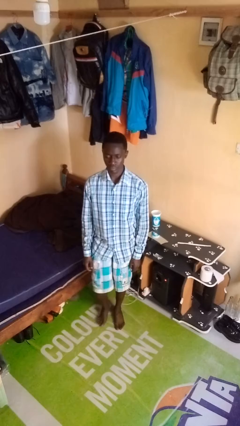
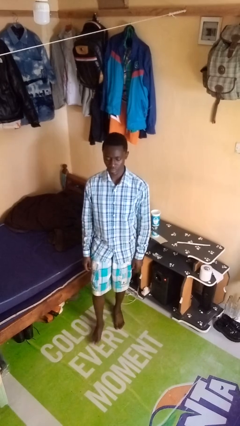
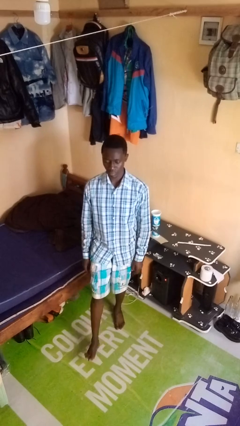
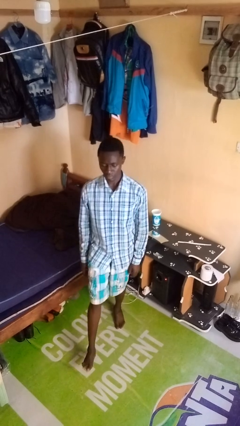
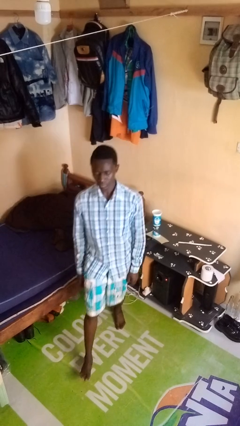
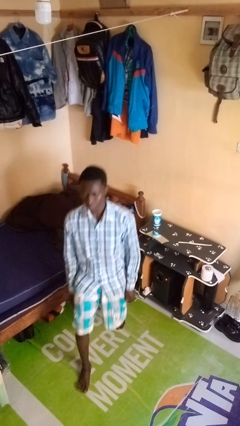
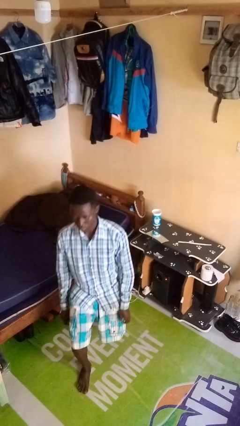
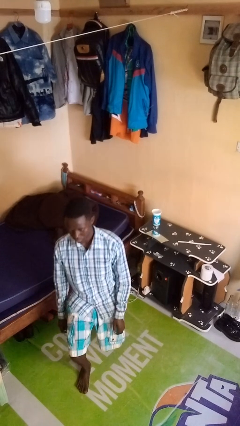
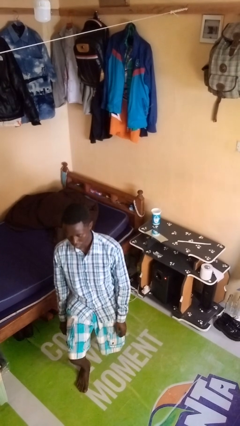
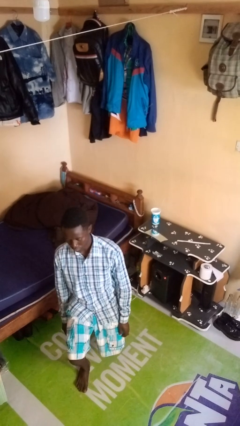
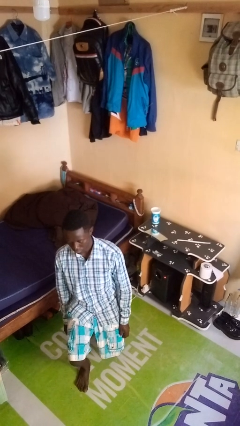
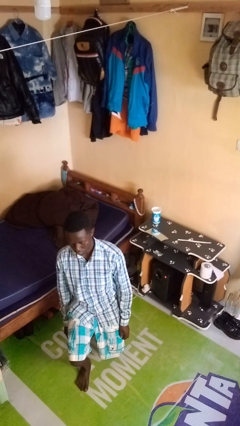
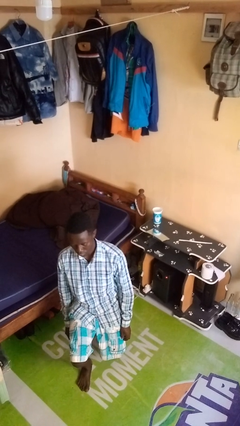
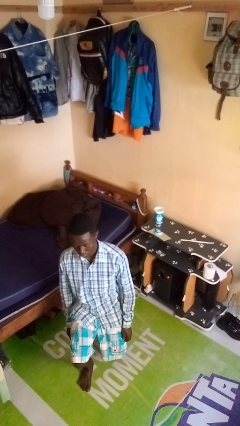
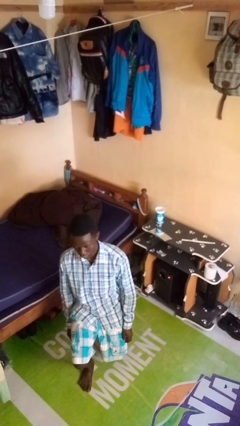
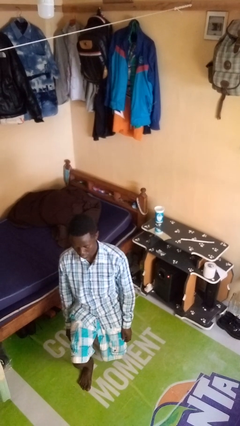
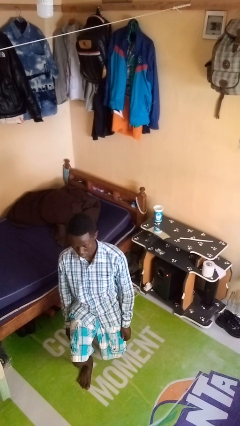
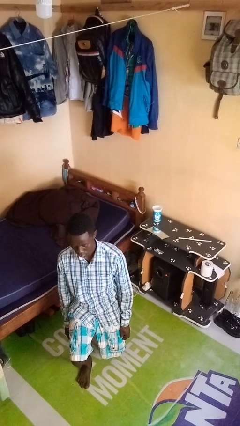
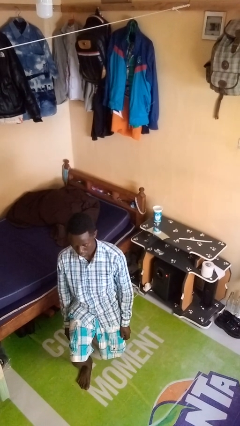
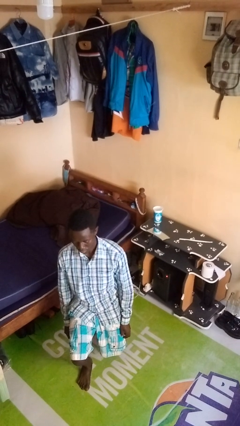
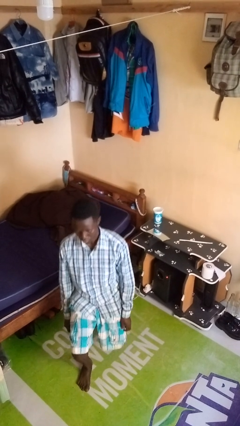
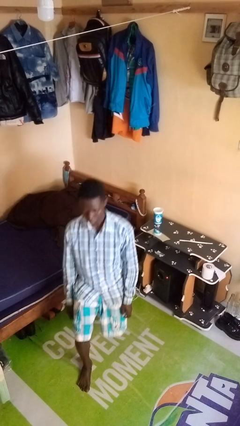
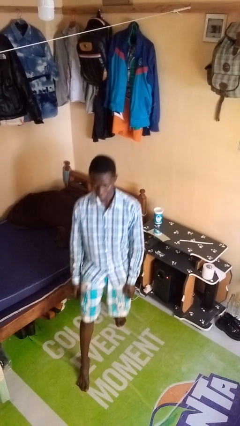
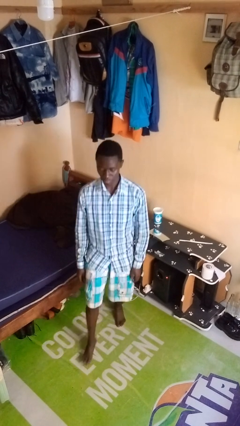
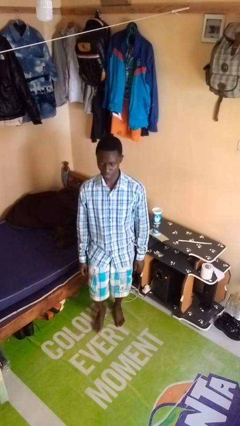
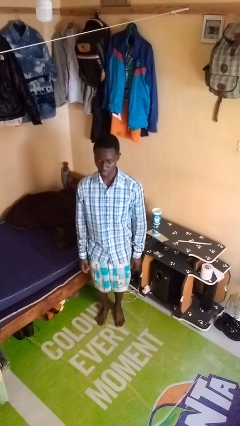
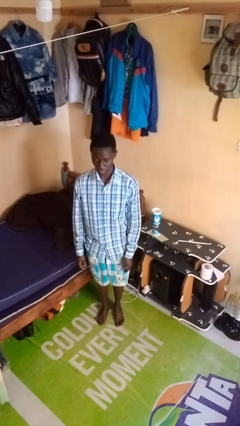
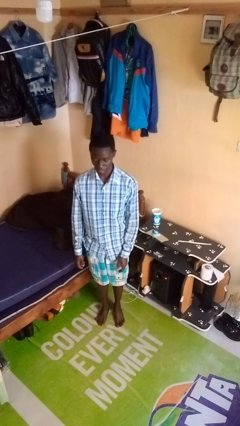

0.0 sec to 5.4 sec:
person exercises with lunges

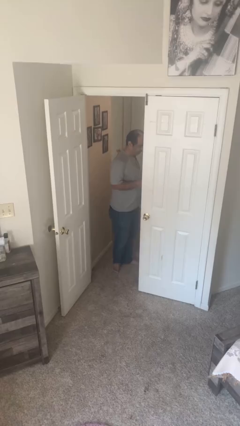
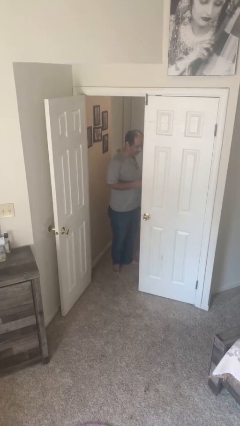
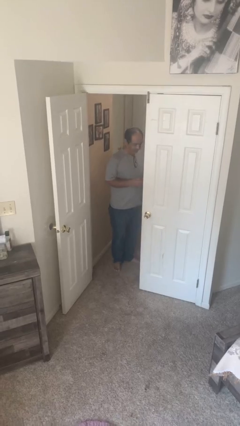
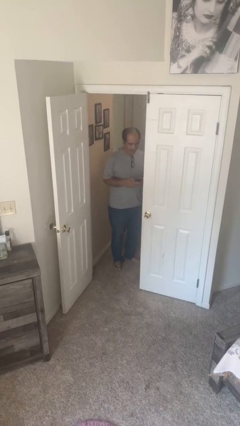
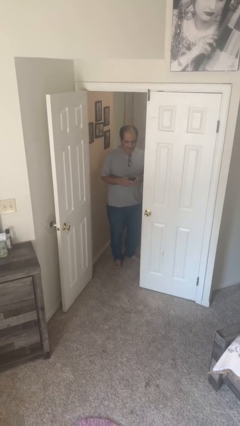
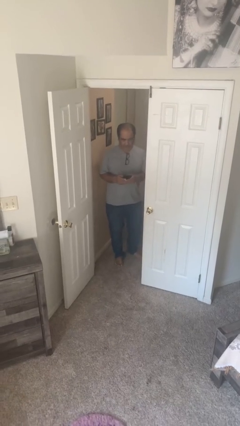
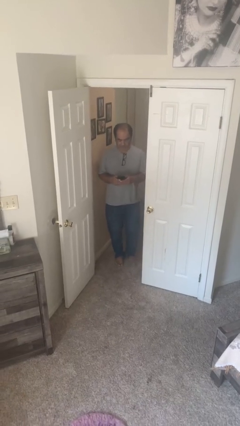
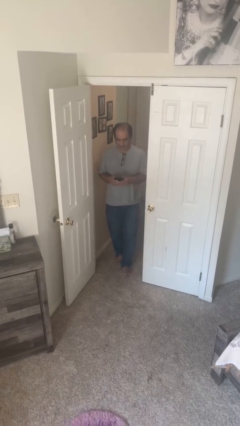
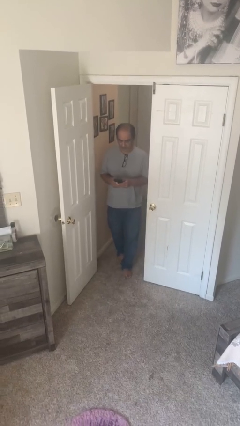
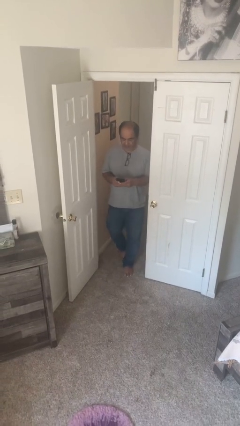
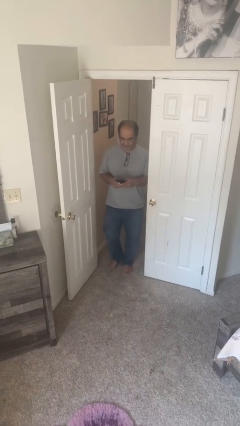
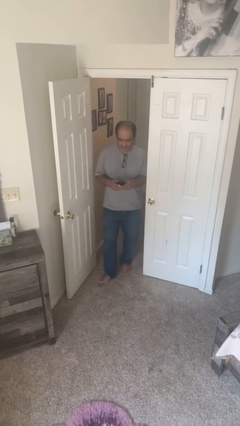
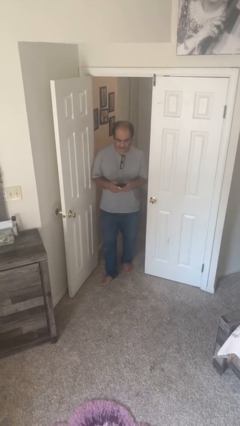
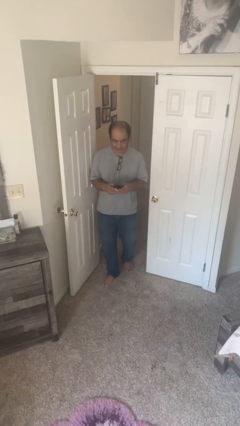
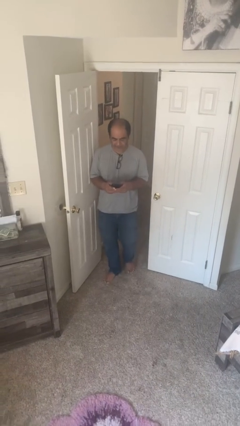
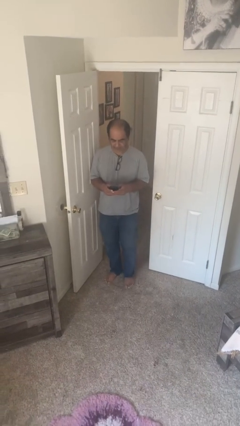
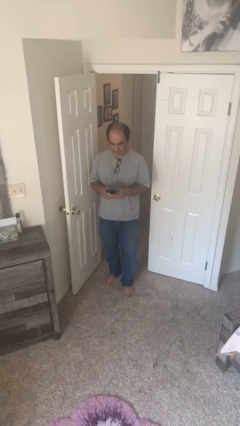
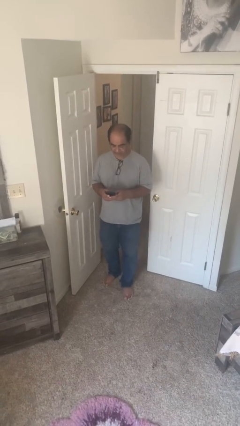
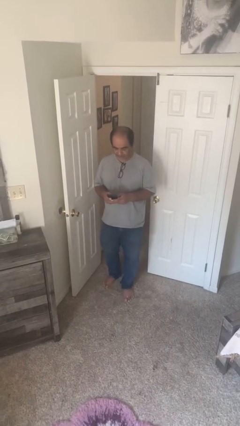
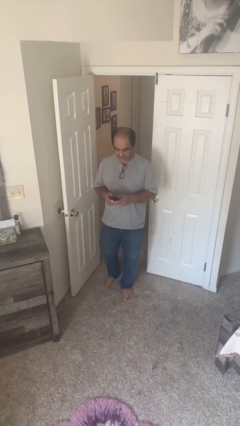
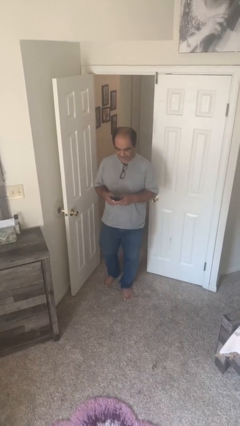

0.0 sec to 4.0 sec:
person enters scene through structure

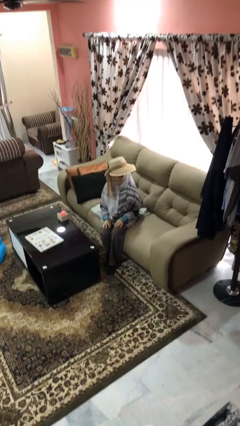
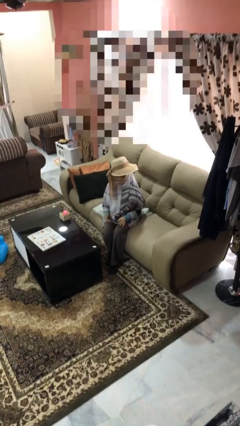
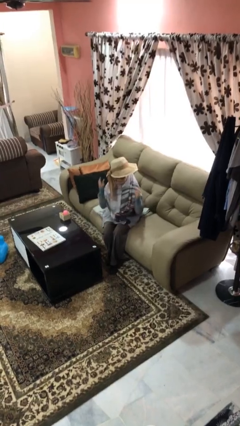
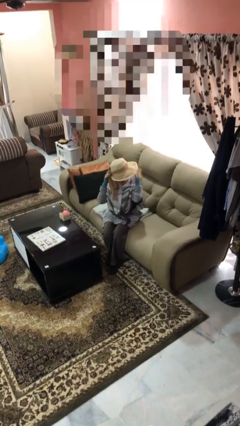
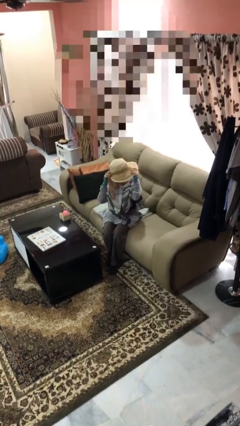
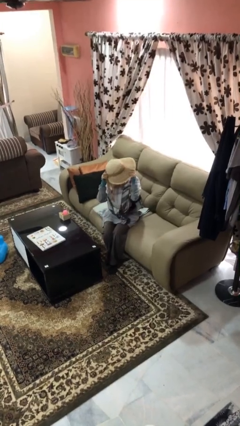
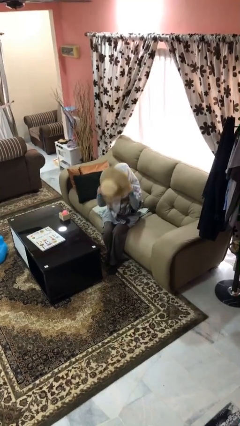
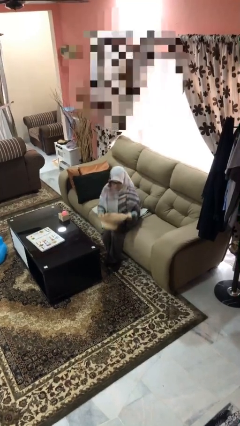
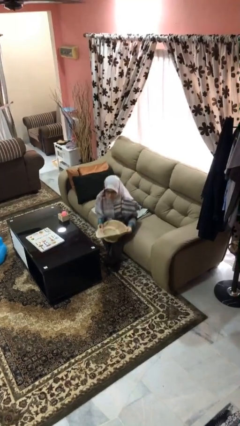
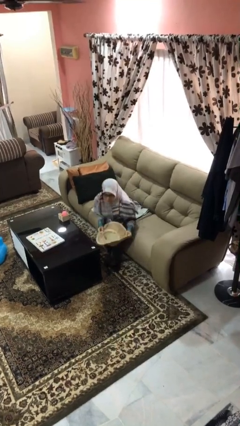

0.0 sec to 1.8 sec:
person takes off hat

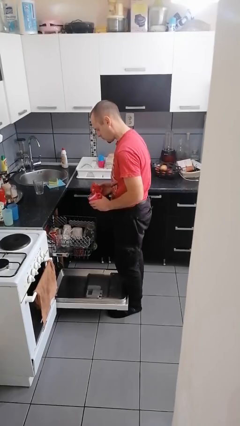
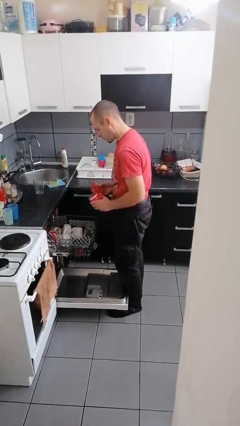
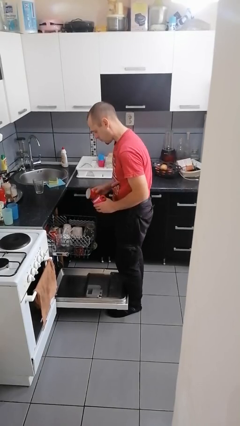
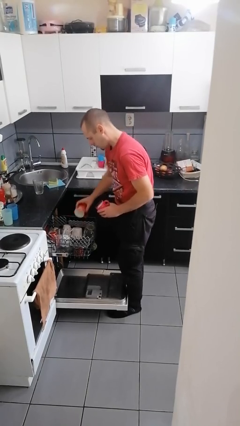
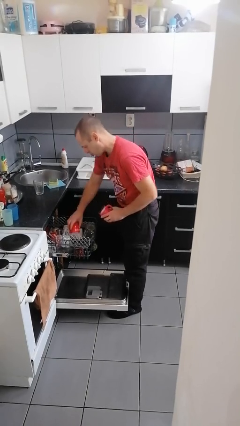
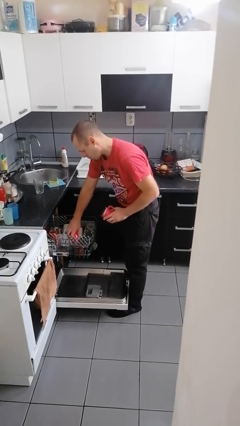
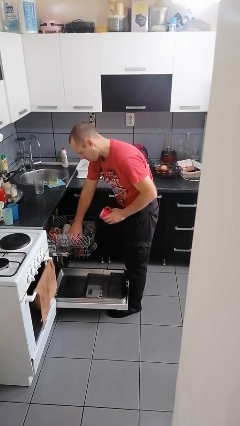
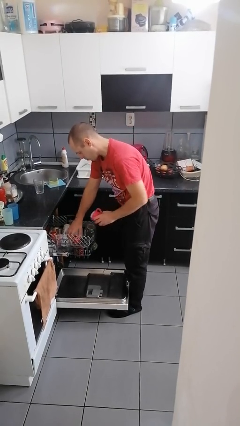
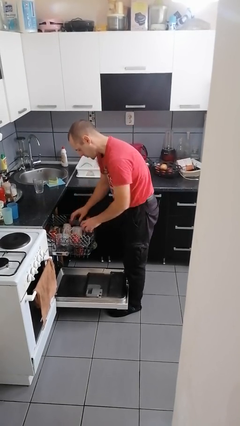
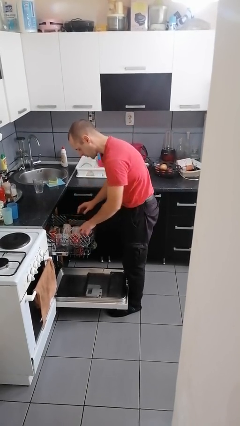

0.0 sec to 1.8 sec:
person loads dishwasher

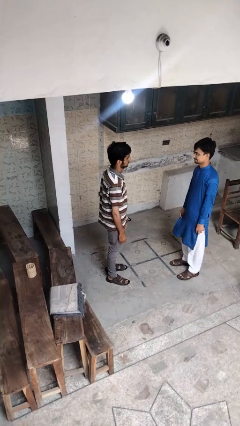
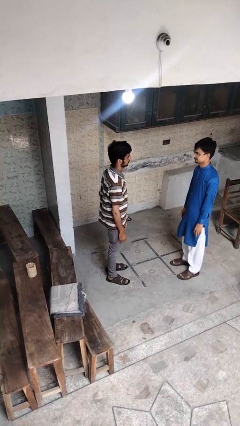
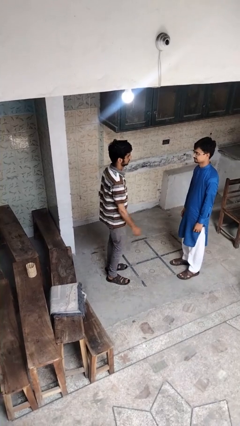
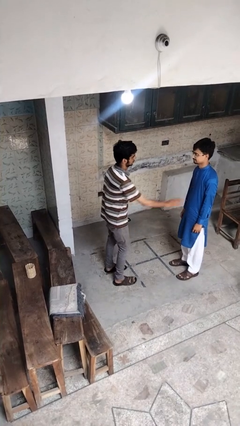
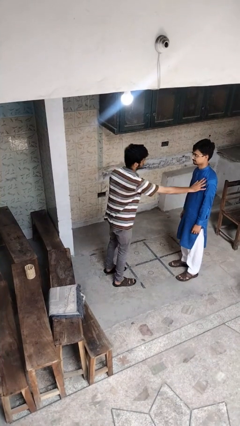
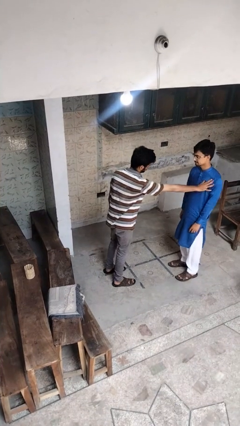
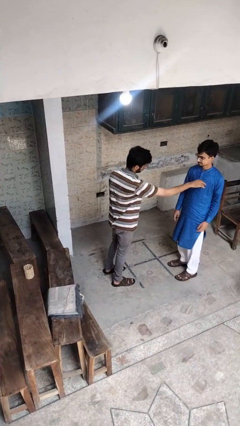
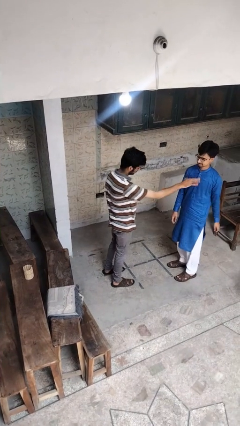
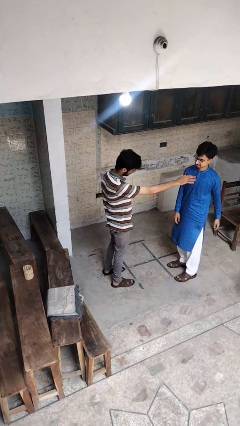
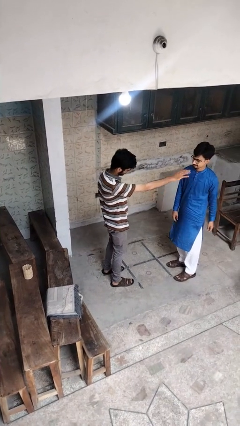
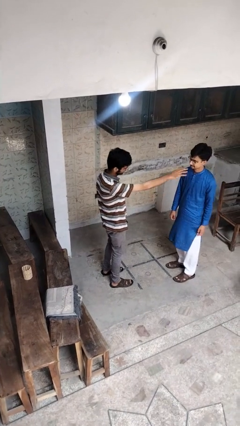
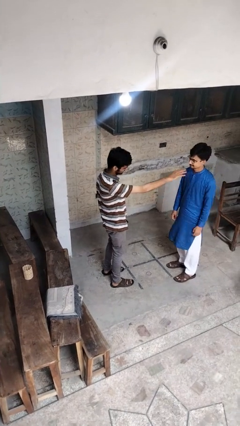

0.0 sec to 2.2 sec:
person shoves person

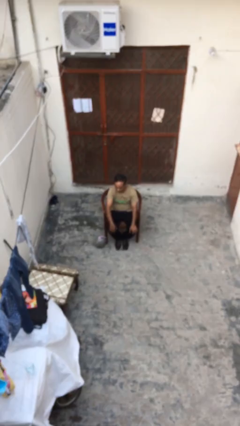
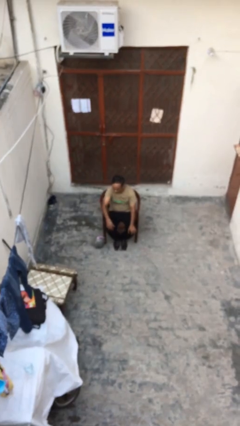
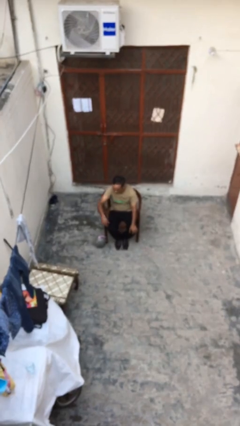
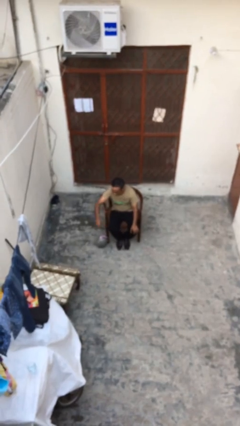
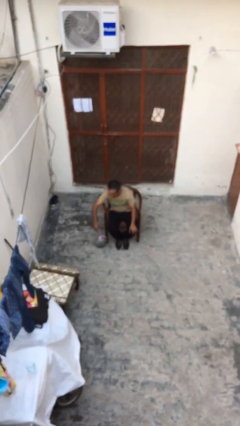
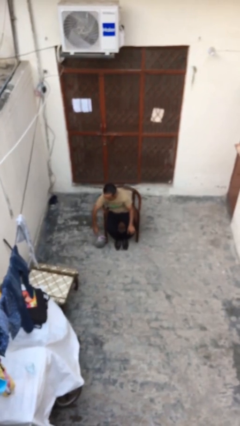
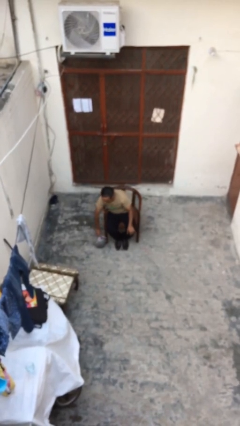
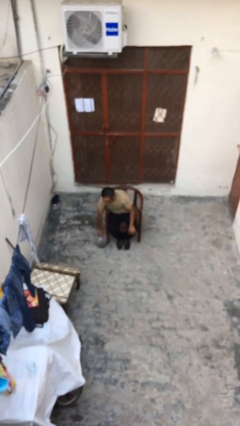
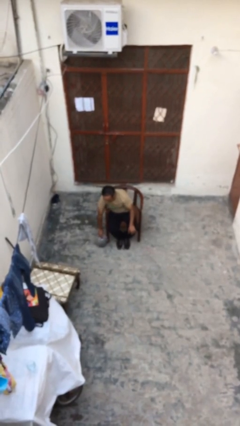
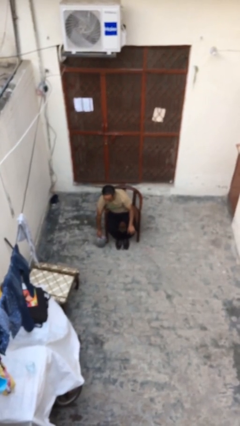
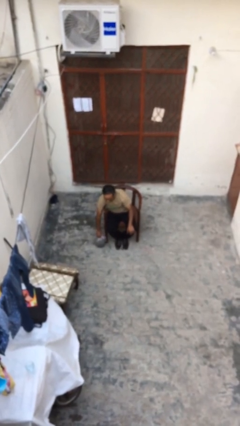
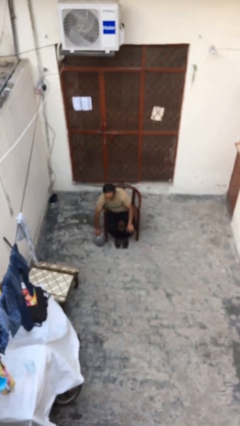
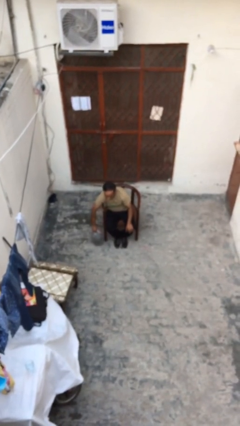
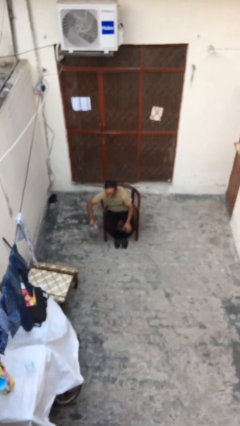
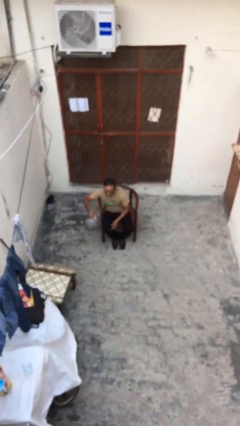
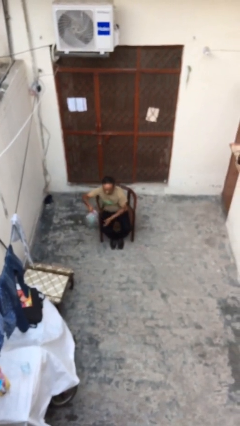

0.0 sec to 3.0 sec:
person picks up object from floor
